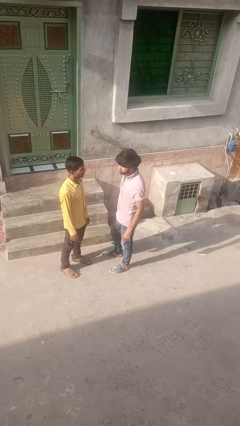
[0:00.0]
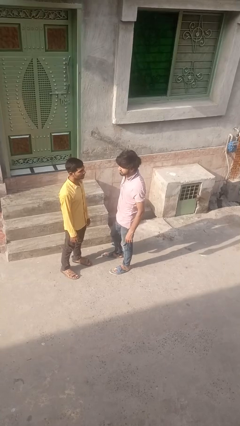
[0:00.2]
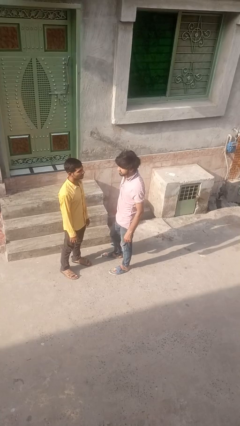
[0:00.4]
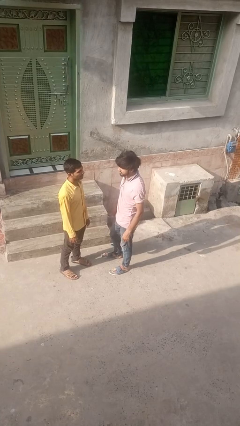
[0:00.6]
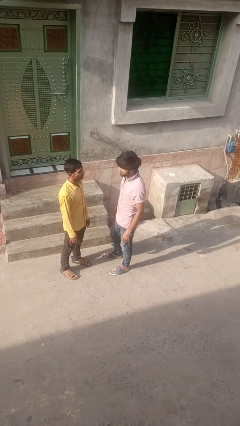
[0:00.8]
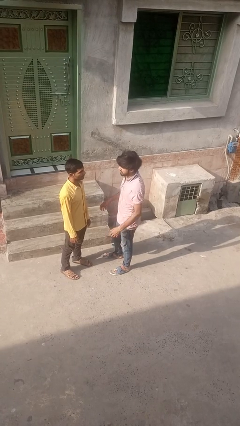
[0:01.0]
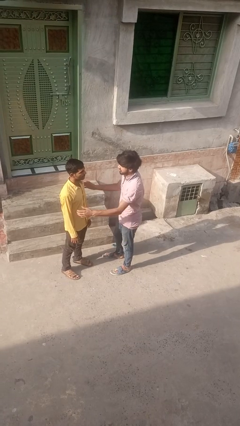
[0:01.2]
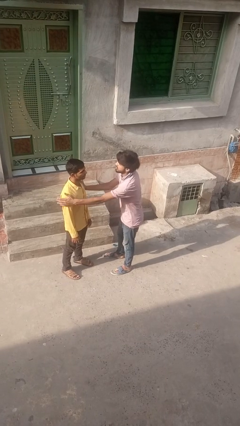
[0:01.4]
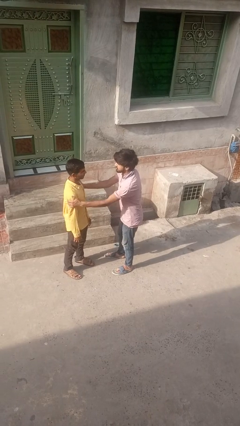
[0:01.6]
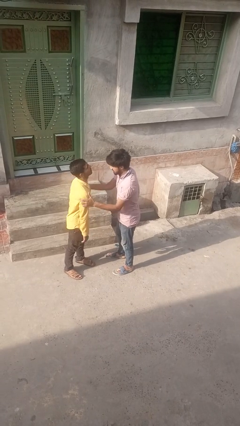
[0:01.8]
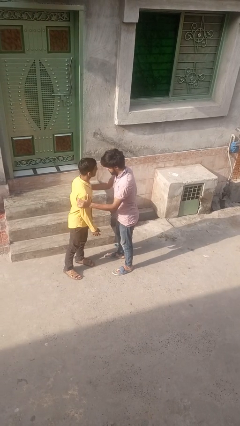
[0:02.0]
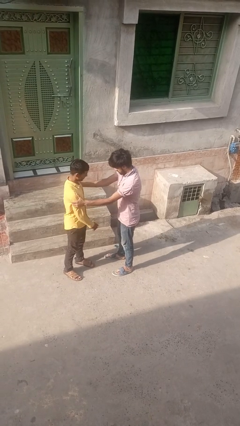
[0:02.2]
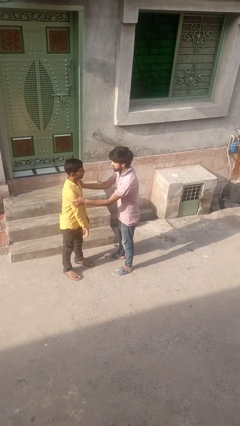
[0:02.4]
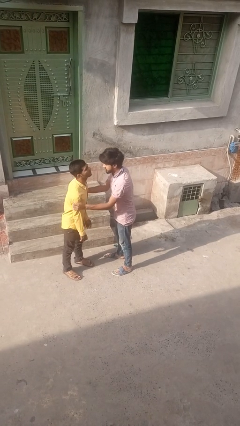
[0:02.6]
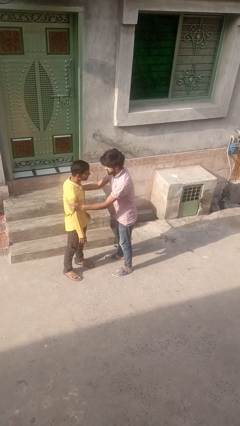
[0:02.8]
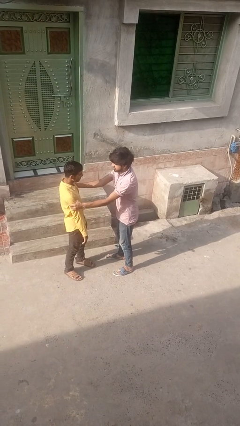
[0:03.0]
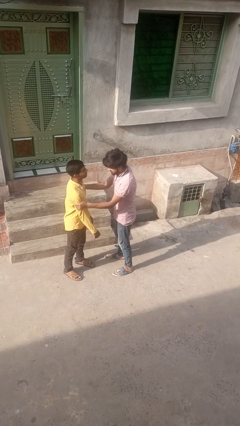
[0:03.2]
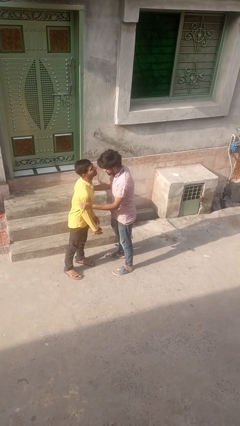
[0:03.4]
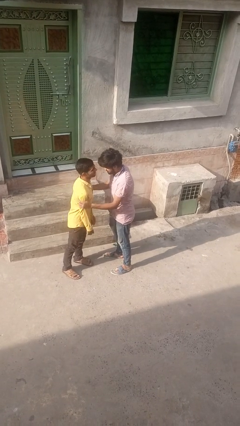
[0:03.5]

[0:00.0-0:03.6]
person grabs person by bicep

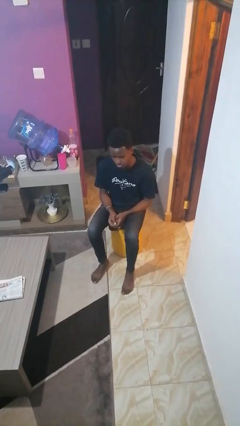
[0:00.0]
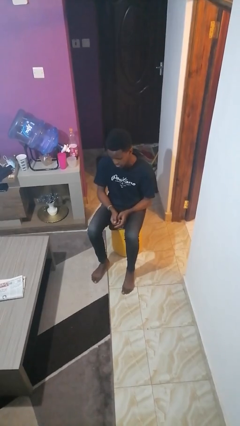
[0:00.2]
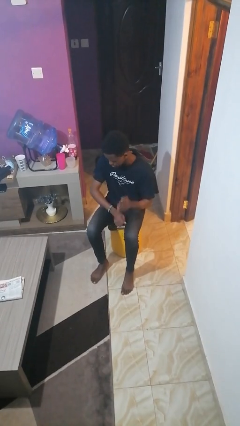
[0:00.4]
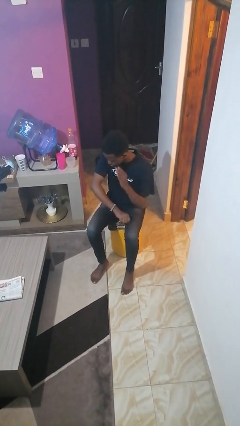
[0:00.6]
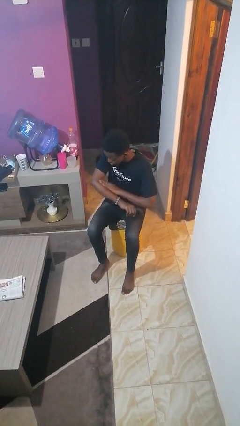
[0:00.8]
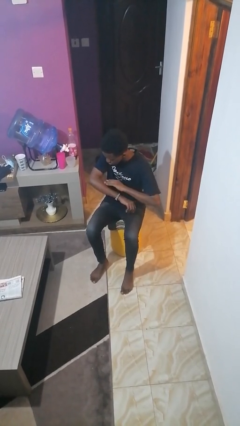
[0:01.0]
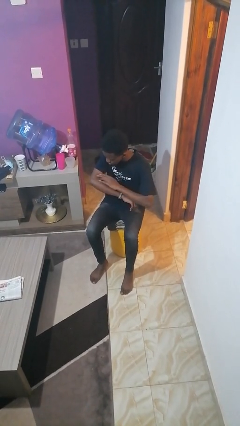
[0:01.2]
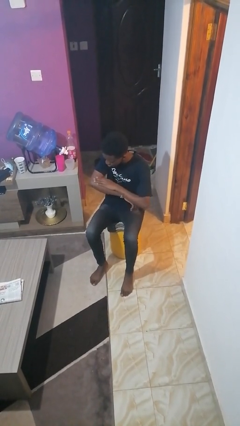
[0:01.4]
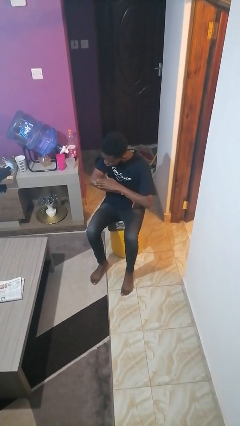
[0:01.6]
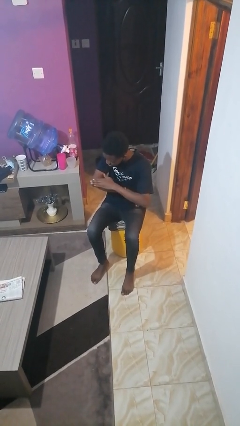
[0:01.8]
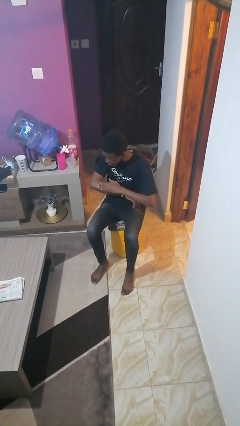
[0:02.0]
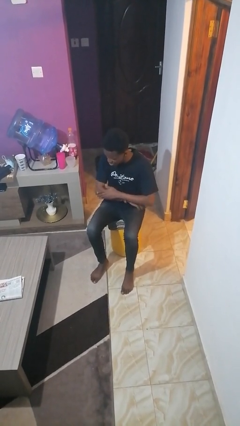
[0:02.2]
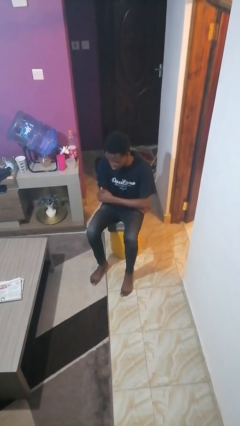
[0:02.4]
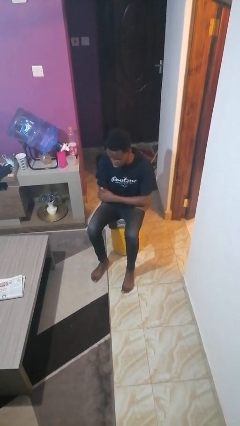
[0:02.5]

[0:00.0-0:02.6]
person swats bug

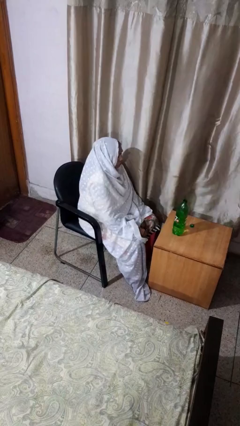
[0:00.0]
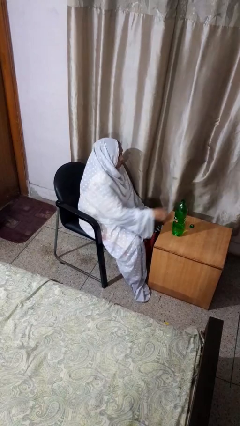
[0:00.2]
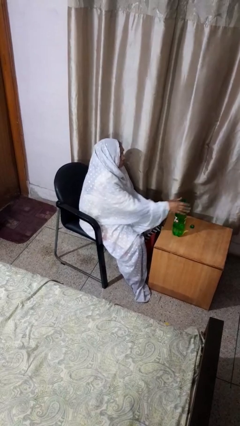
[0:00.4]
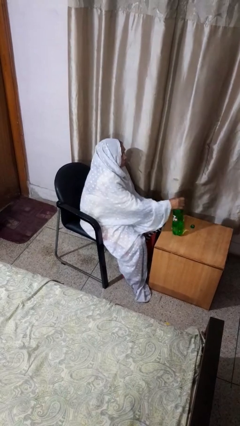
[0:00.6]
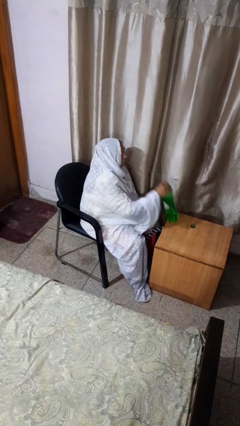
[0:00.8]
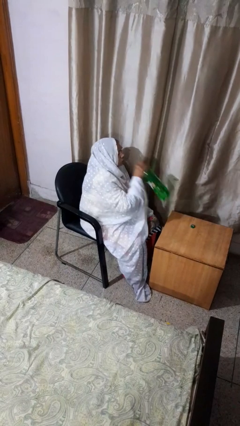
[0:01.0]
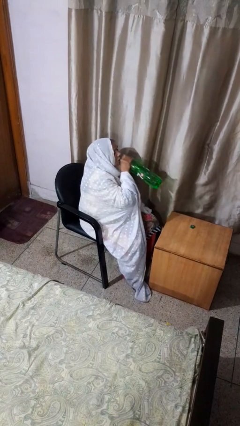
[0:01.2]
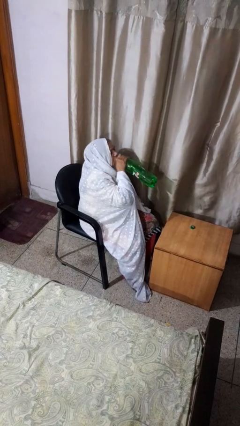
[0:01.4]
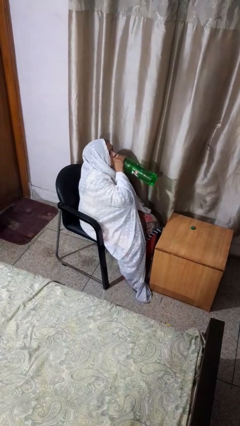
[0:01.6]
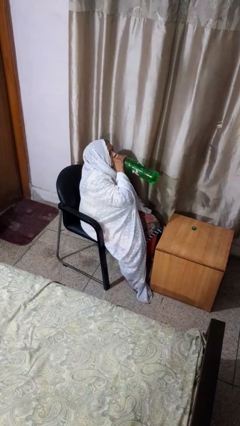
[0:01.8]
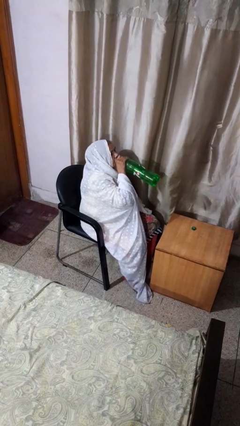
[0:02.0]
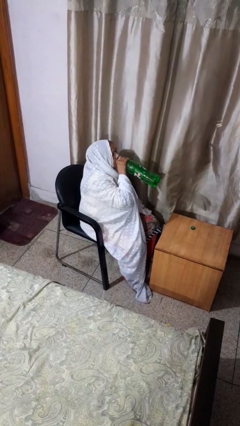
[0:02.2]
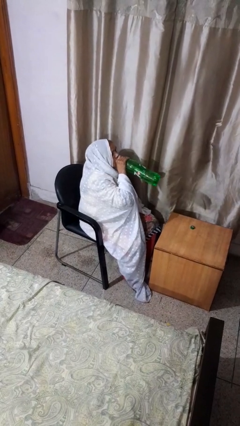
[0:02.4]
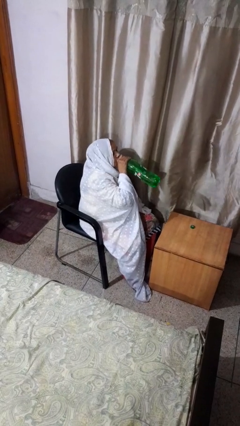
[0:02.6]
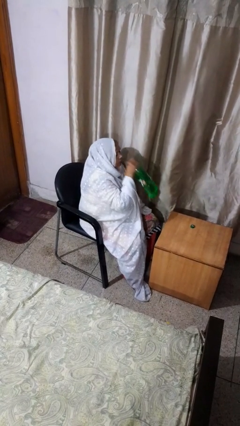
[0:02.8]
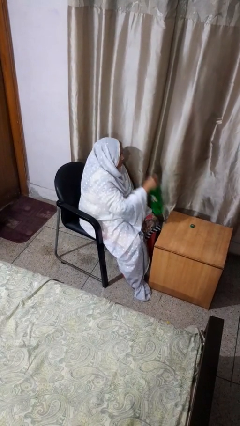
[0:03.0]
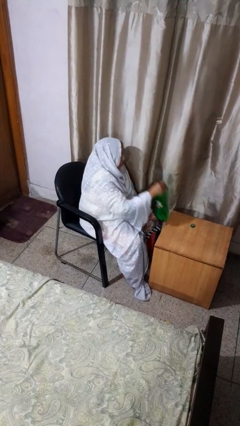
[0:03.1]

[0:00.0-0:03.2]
person drinks from bottle

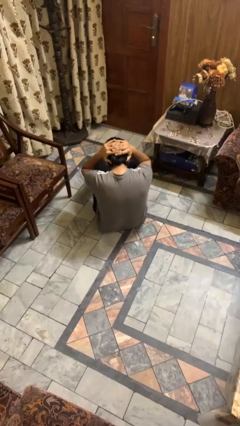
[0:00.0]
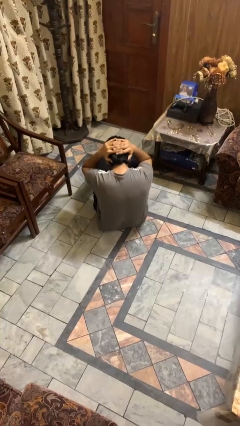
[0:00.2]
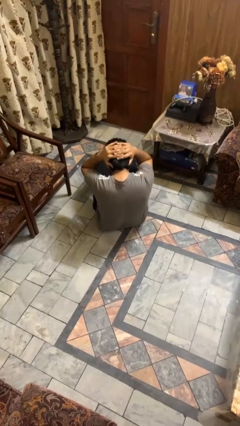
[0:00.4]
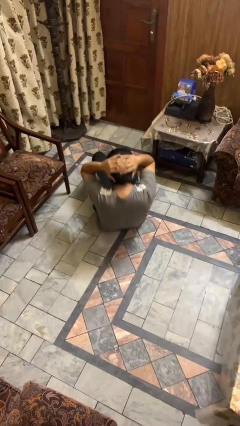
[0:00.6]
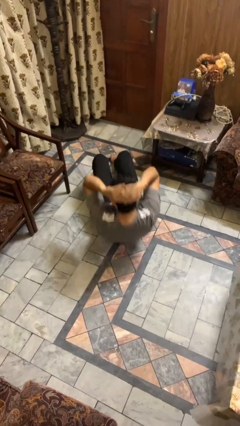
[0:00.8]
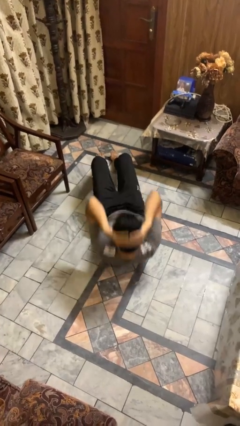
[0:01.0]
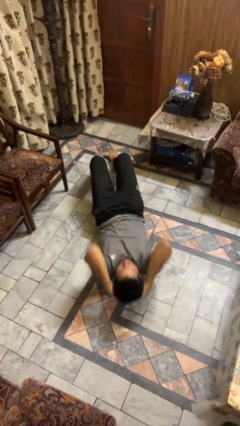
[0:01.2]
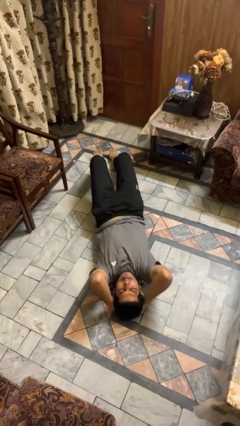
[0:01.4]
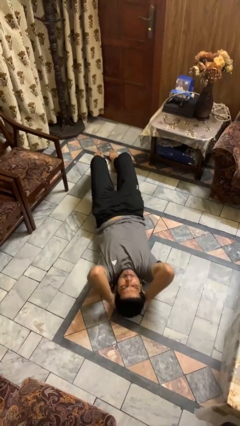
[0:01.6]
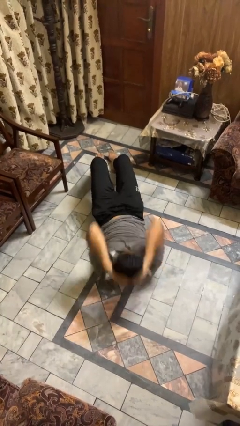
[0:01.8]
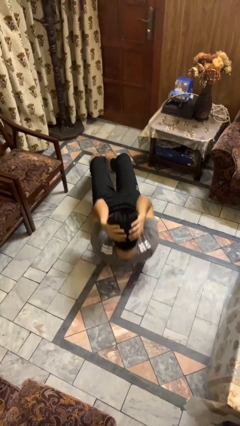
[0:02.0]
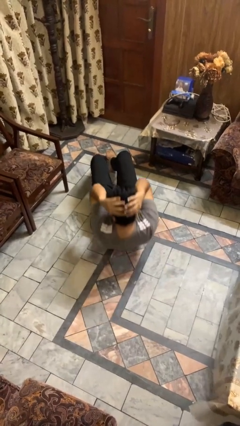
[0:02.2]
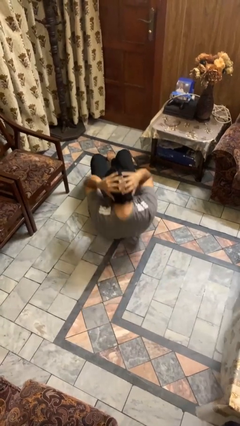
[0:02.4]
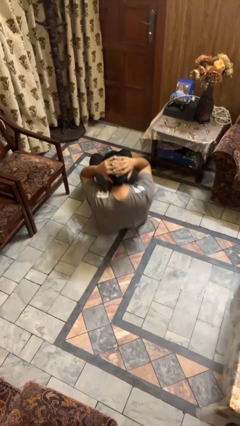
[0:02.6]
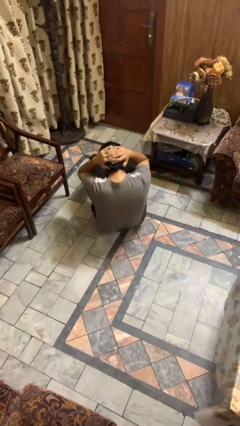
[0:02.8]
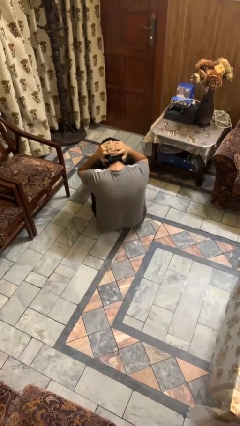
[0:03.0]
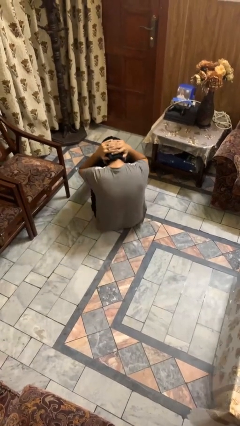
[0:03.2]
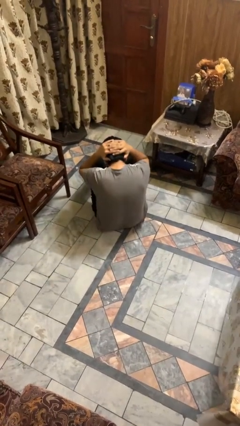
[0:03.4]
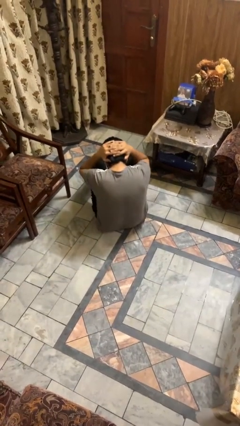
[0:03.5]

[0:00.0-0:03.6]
person exercises with situp

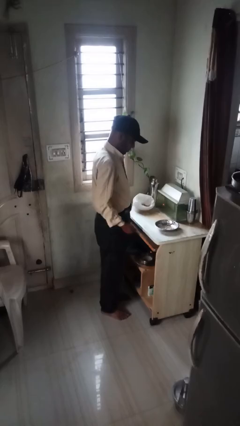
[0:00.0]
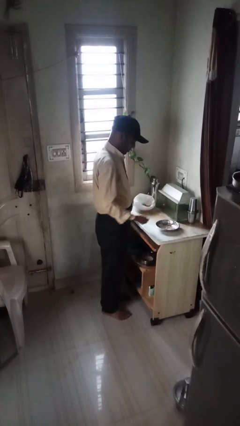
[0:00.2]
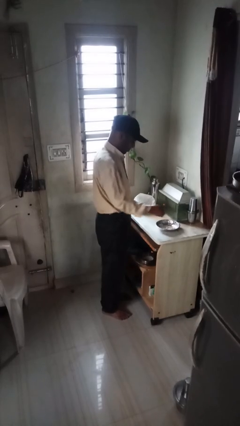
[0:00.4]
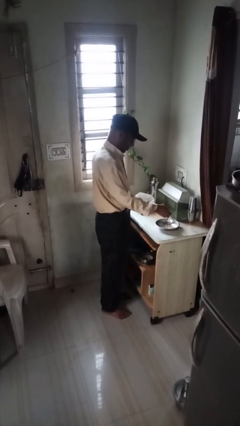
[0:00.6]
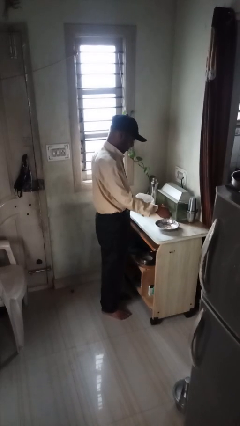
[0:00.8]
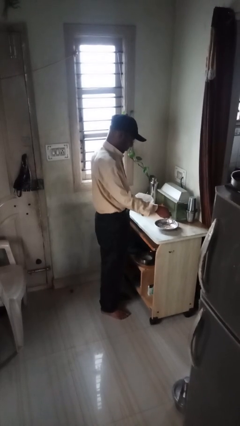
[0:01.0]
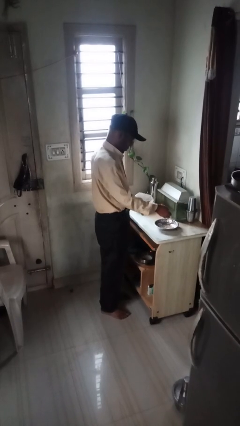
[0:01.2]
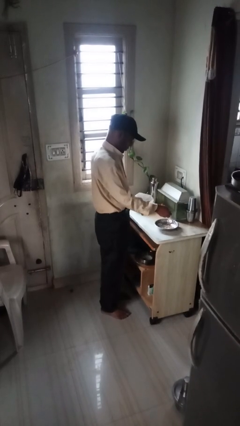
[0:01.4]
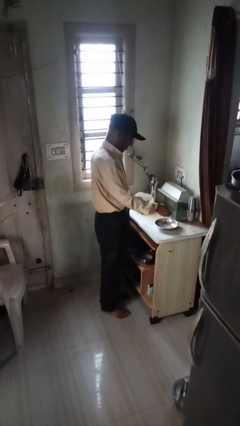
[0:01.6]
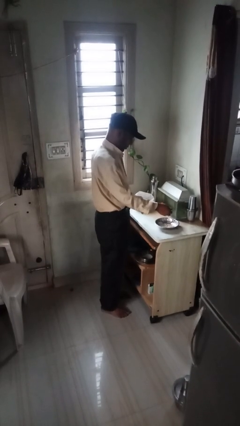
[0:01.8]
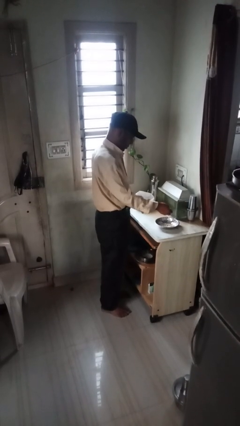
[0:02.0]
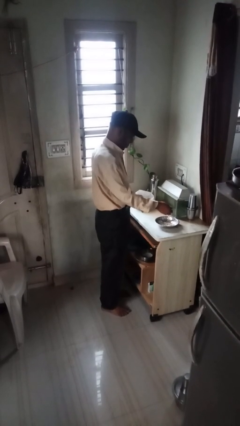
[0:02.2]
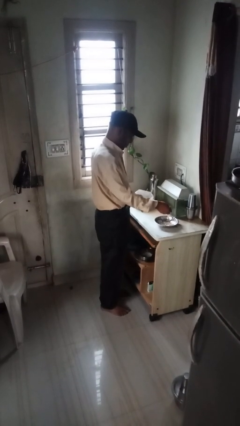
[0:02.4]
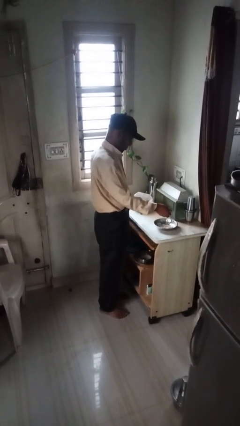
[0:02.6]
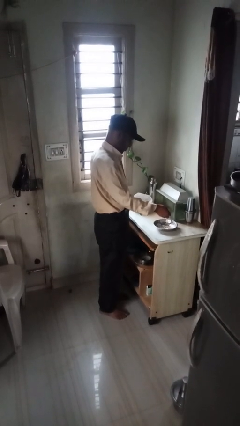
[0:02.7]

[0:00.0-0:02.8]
person pours into bowl

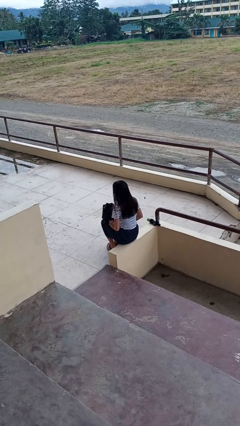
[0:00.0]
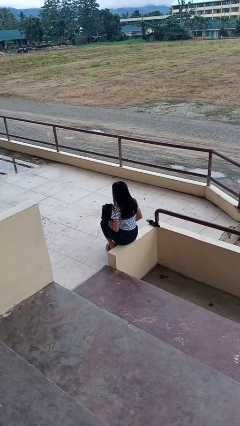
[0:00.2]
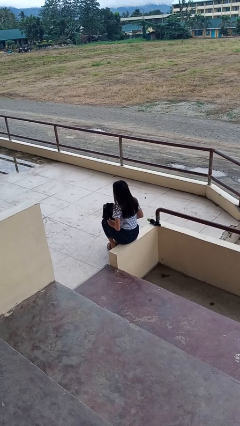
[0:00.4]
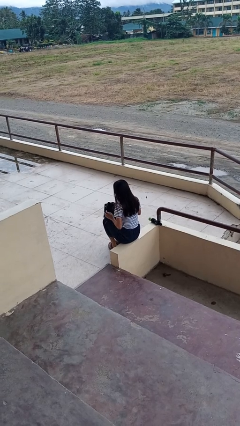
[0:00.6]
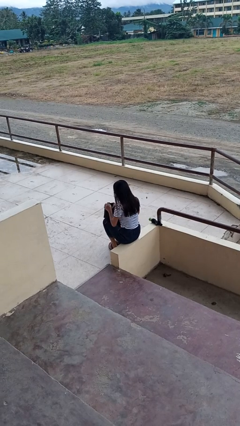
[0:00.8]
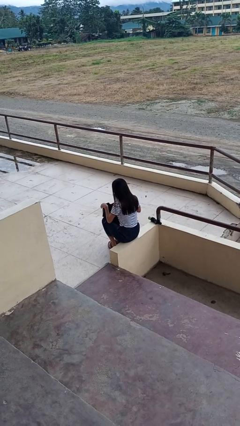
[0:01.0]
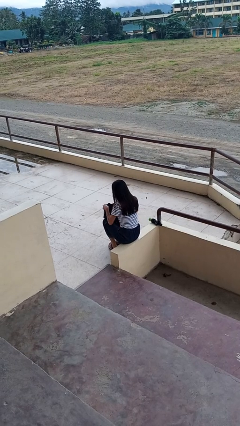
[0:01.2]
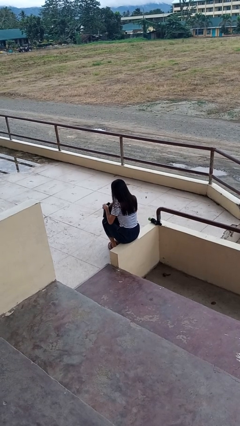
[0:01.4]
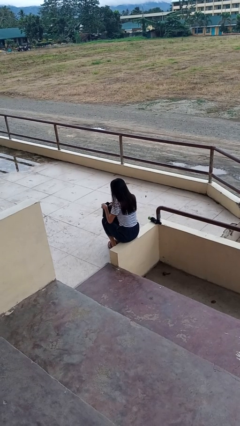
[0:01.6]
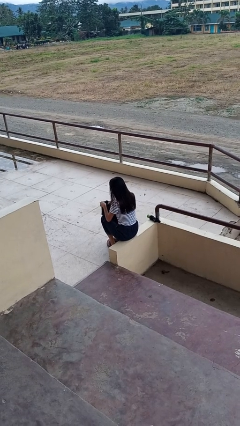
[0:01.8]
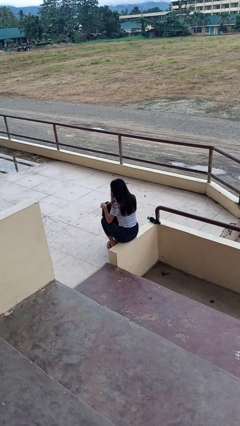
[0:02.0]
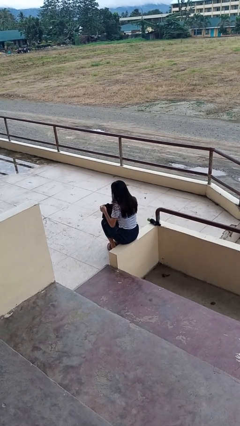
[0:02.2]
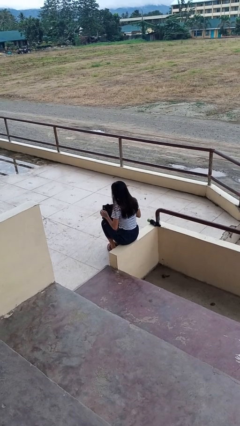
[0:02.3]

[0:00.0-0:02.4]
person searches in couch
